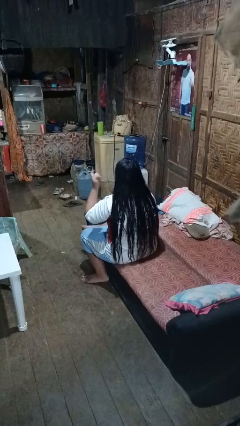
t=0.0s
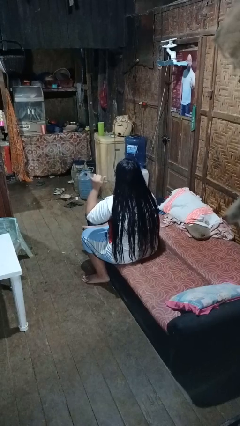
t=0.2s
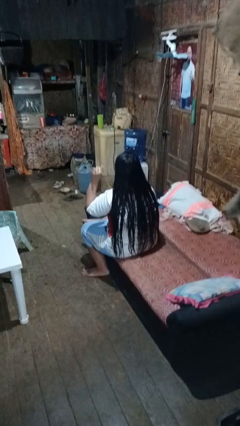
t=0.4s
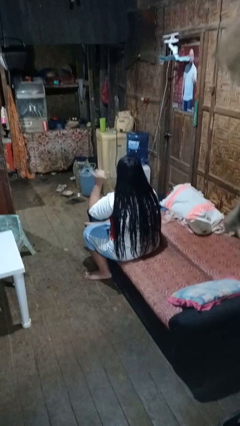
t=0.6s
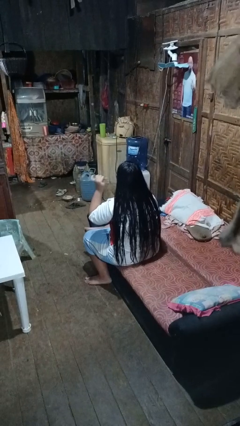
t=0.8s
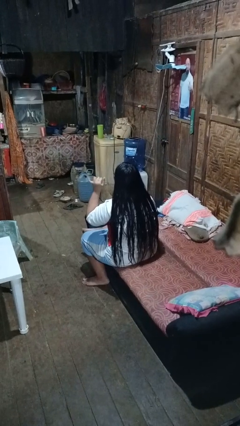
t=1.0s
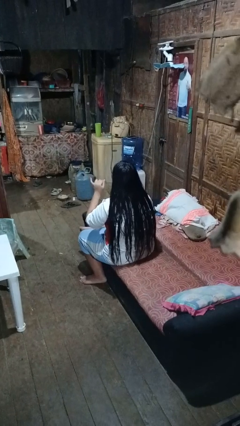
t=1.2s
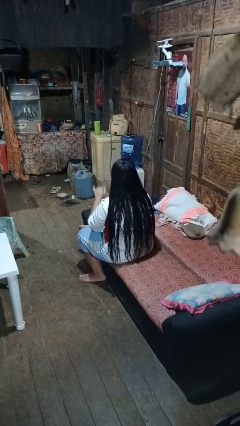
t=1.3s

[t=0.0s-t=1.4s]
person gestures hang loose

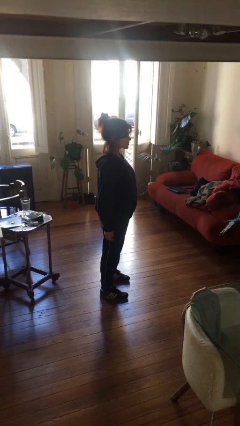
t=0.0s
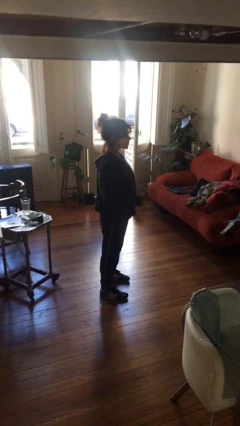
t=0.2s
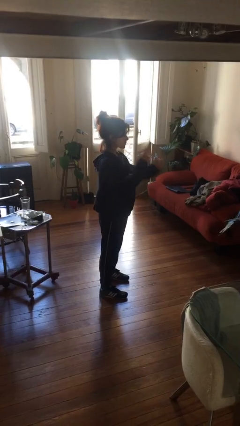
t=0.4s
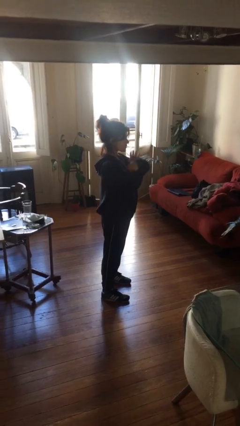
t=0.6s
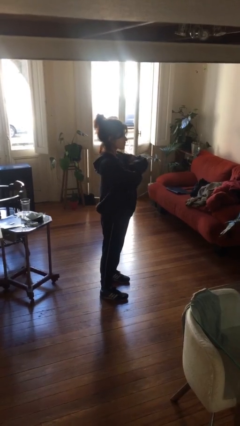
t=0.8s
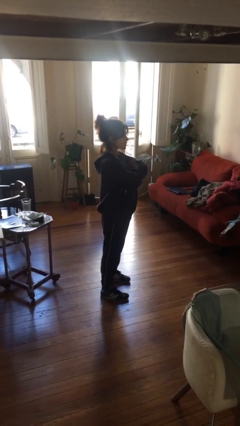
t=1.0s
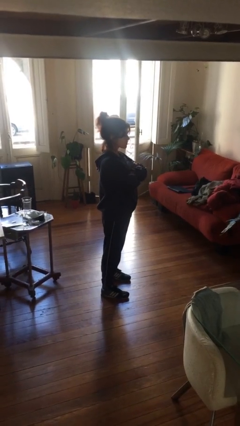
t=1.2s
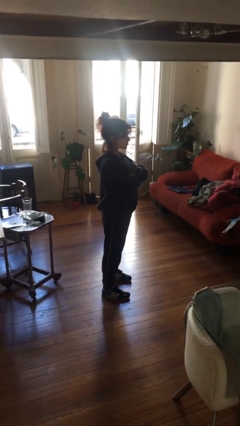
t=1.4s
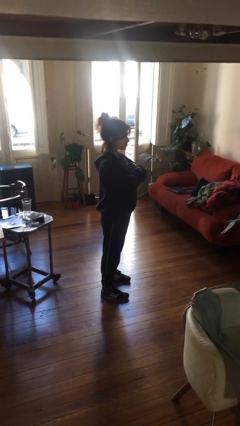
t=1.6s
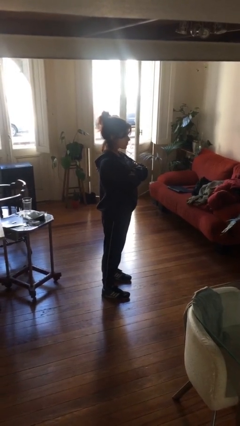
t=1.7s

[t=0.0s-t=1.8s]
person crosses arms

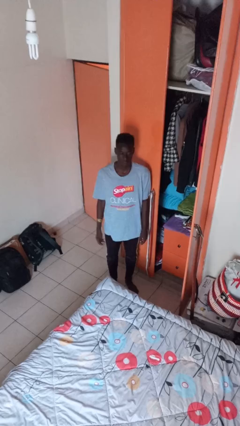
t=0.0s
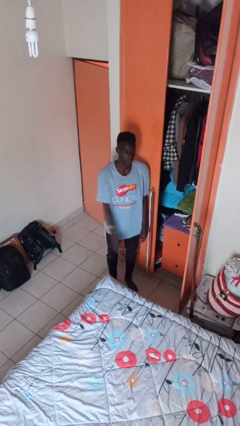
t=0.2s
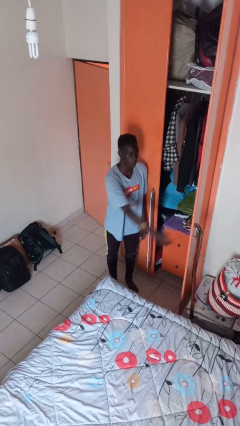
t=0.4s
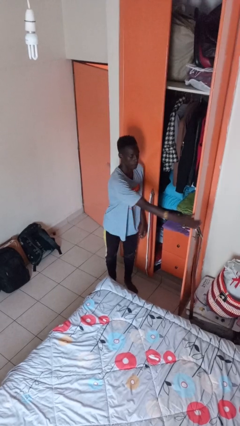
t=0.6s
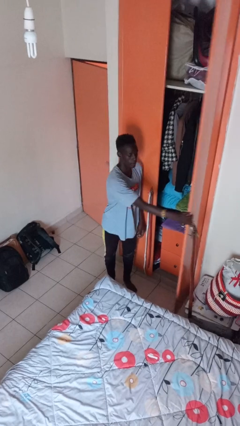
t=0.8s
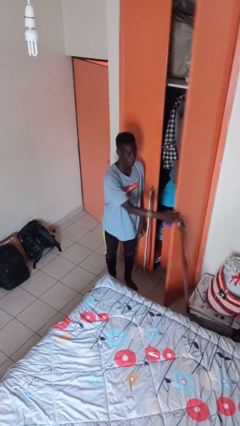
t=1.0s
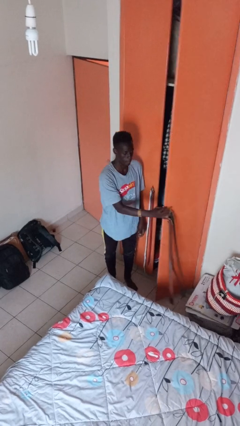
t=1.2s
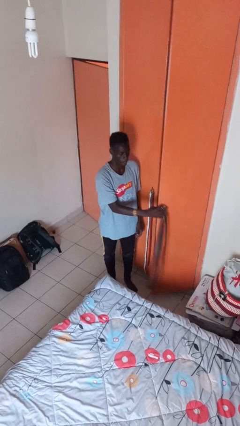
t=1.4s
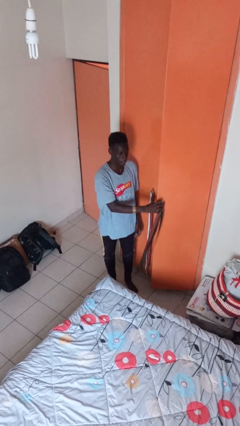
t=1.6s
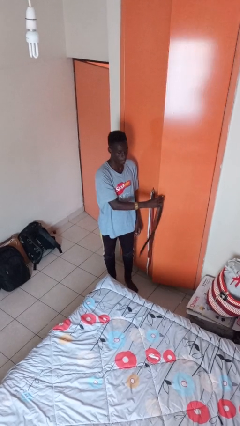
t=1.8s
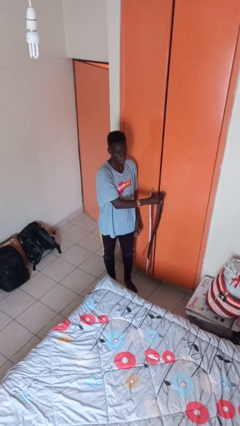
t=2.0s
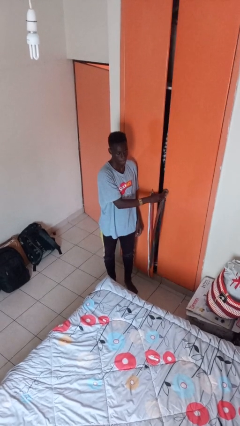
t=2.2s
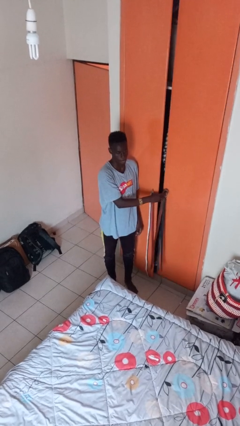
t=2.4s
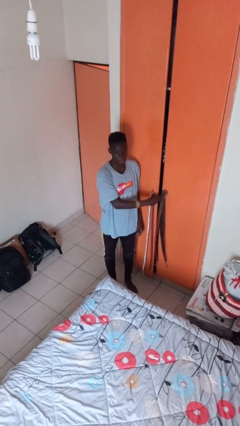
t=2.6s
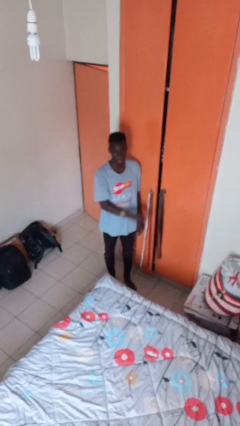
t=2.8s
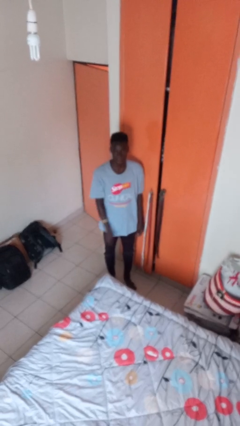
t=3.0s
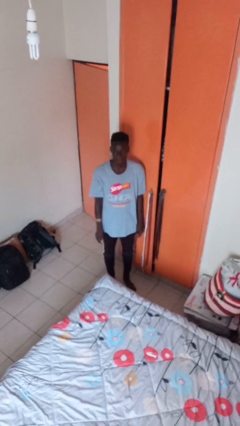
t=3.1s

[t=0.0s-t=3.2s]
person closes closet door

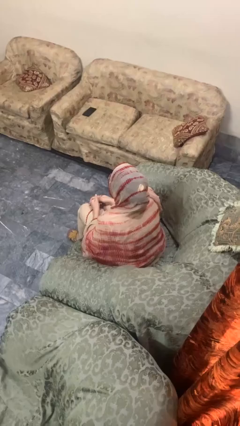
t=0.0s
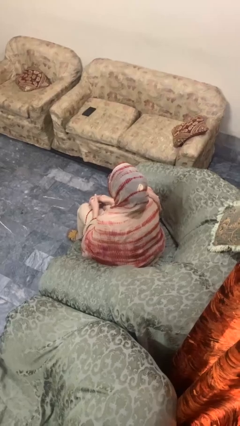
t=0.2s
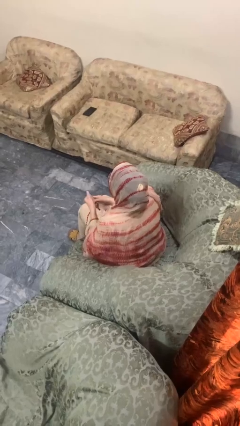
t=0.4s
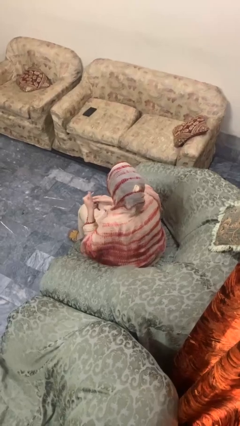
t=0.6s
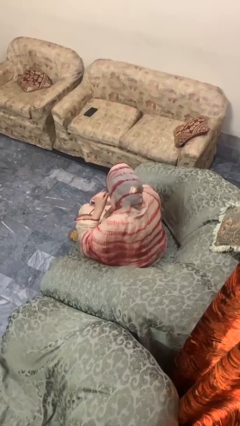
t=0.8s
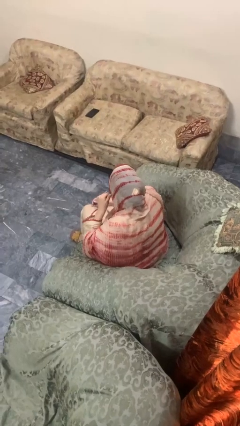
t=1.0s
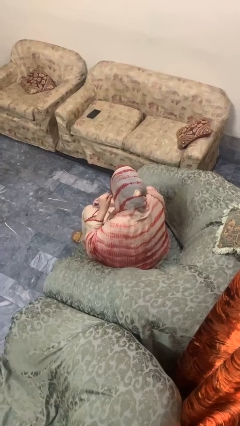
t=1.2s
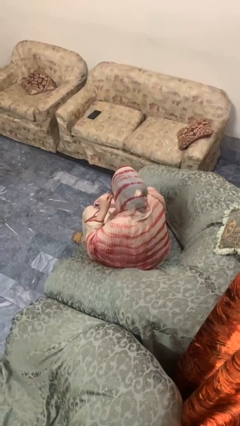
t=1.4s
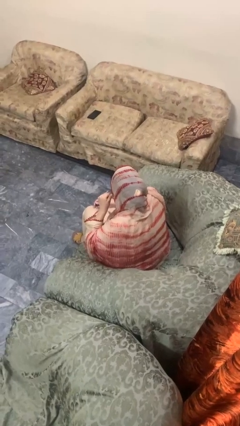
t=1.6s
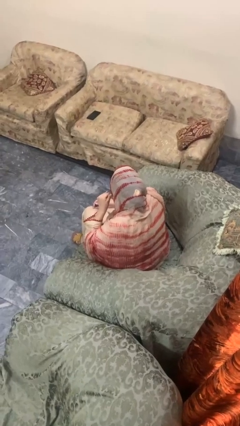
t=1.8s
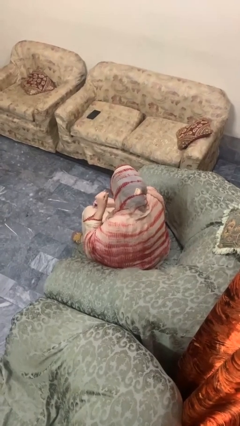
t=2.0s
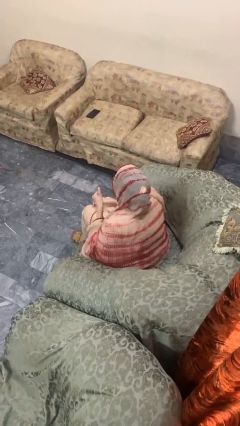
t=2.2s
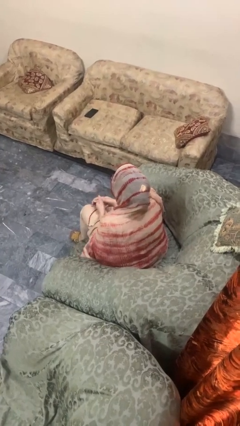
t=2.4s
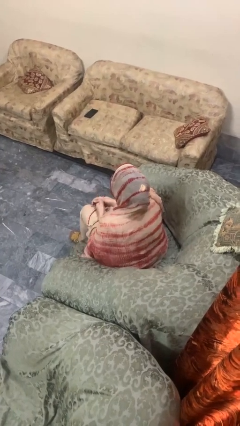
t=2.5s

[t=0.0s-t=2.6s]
person gestures call me

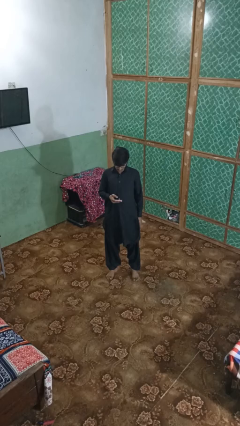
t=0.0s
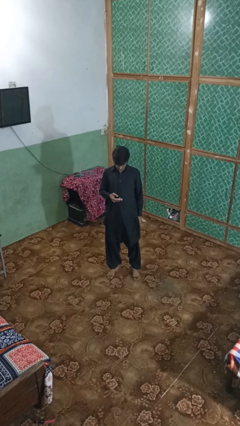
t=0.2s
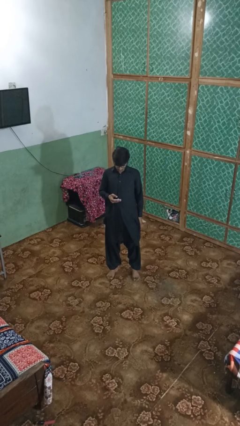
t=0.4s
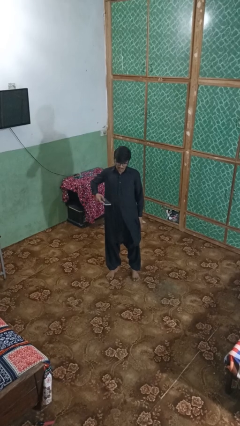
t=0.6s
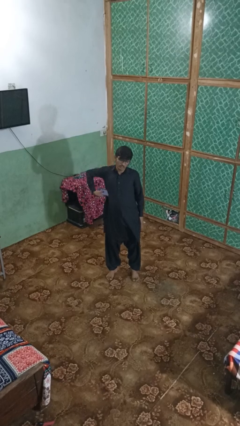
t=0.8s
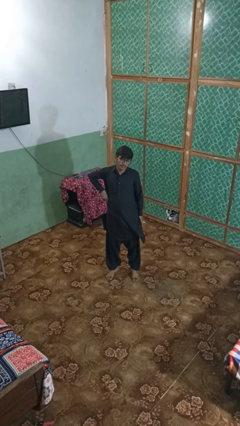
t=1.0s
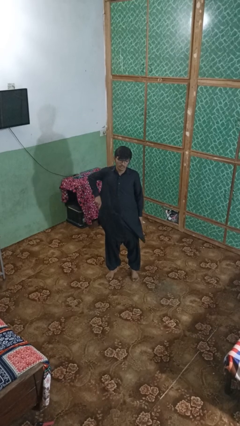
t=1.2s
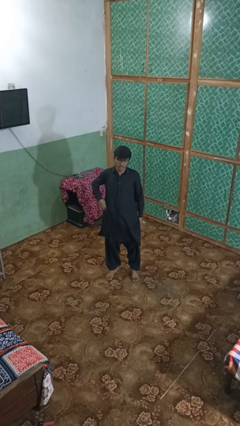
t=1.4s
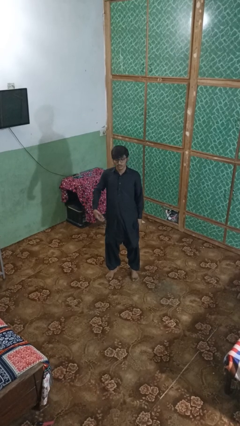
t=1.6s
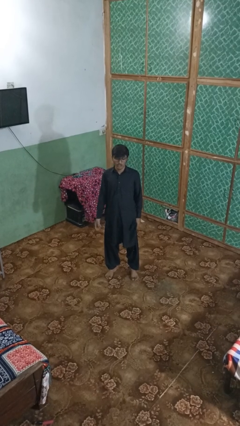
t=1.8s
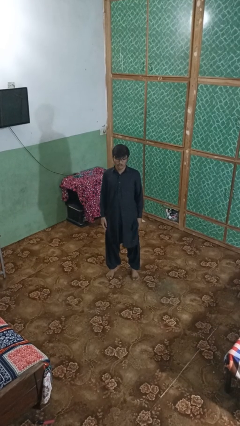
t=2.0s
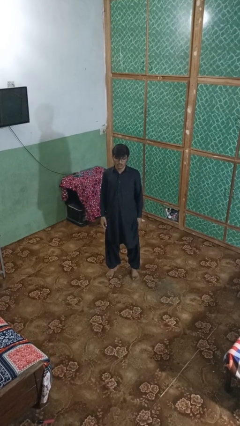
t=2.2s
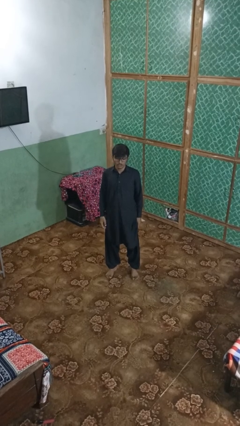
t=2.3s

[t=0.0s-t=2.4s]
person puts phone into pocket

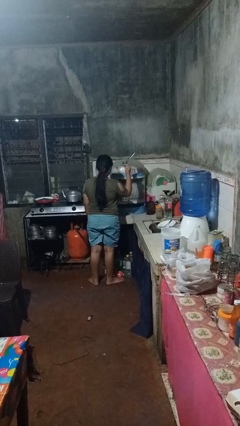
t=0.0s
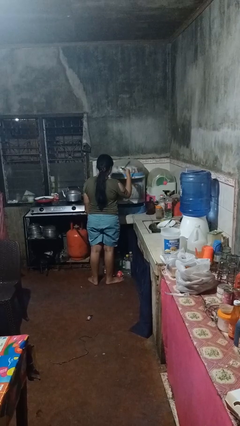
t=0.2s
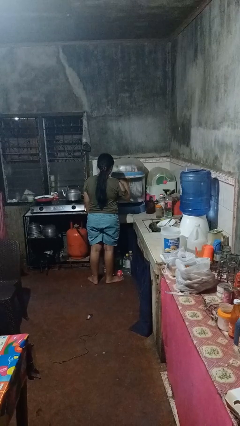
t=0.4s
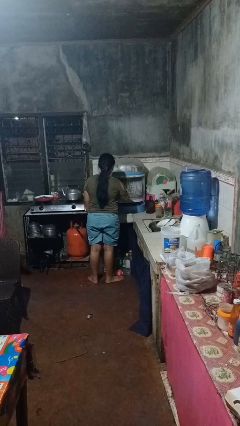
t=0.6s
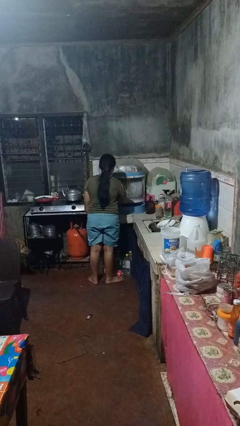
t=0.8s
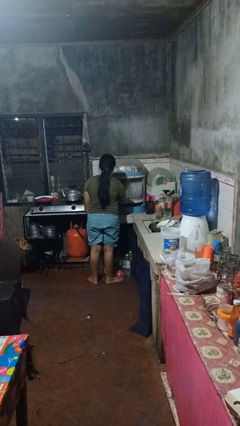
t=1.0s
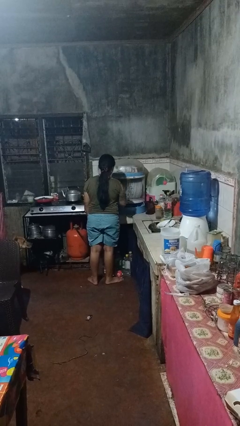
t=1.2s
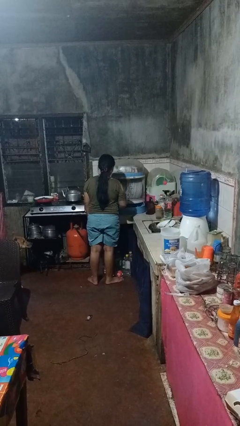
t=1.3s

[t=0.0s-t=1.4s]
person puts object into kitchen drawer

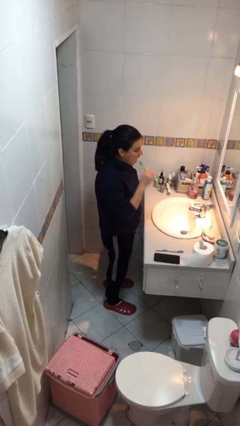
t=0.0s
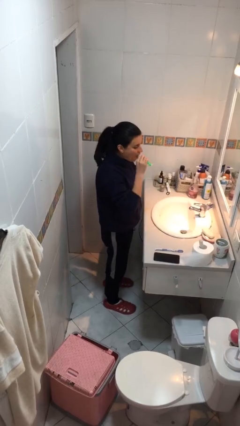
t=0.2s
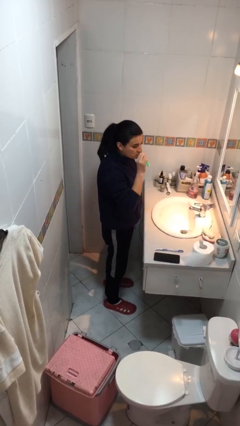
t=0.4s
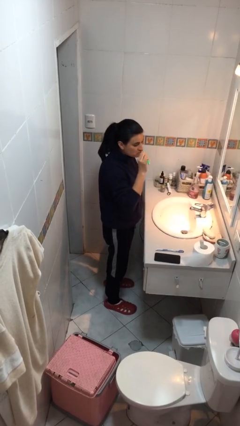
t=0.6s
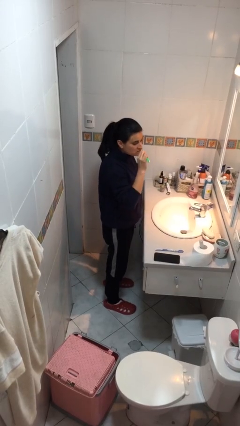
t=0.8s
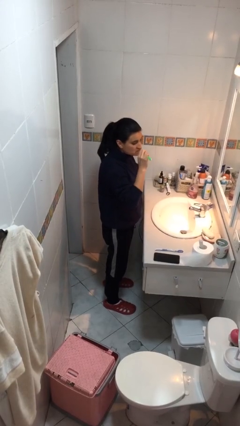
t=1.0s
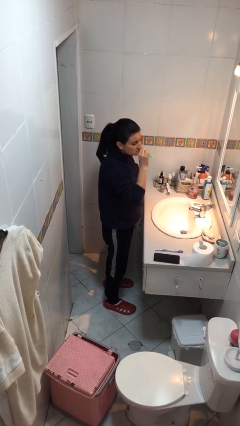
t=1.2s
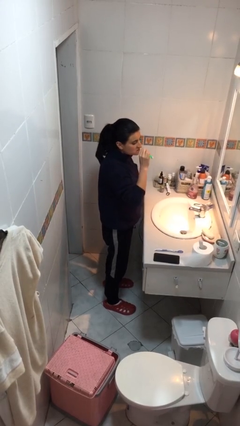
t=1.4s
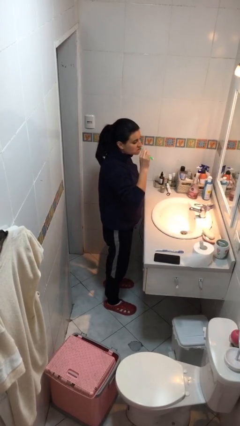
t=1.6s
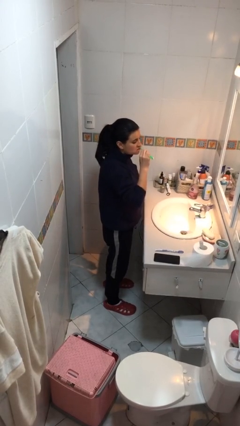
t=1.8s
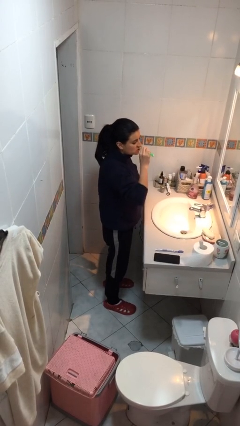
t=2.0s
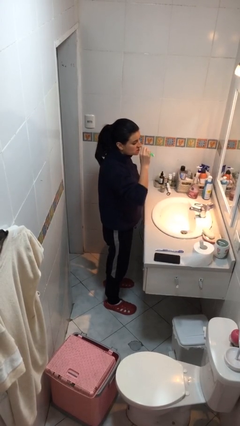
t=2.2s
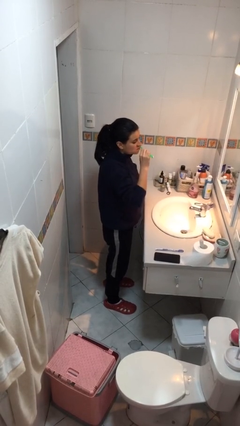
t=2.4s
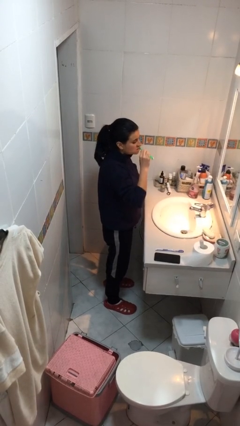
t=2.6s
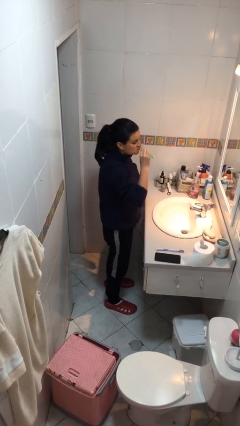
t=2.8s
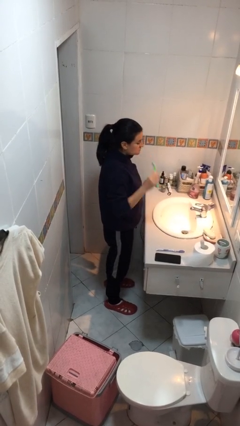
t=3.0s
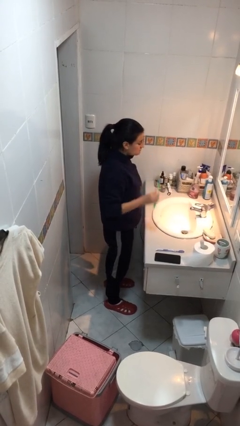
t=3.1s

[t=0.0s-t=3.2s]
person brushes teeth

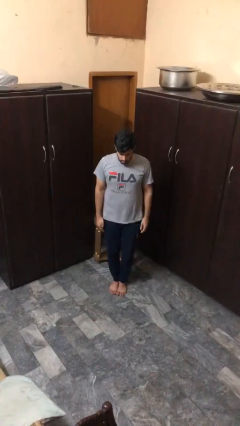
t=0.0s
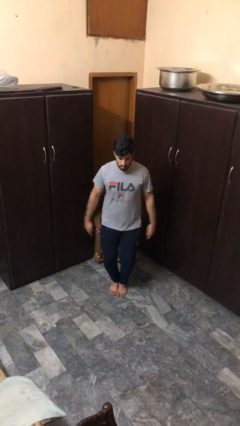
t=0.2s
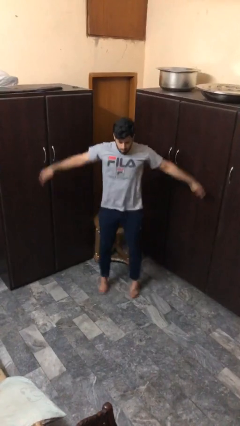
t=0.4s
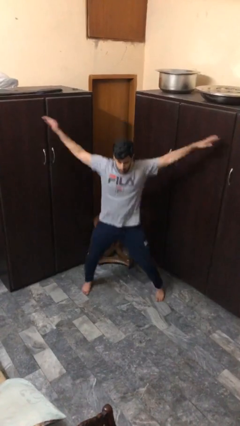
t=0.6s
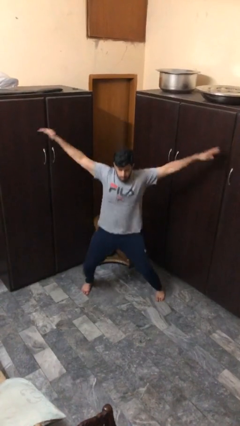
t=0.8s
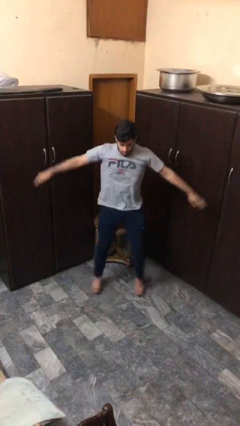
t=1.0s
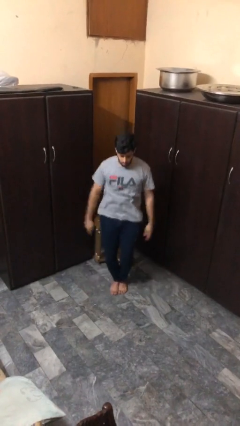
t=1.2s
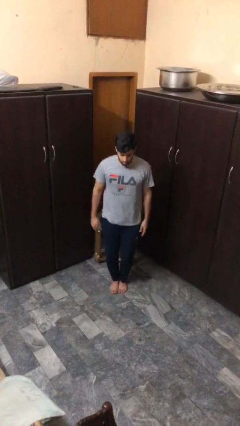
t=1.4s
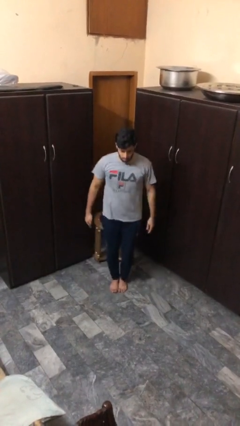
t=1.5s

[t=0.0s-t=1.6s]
person exercises with jumping jacks
